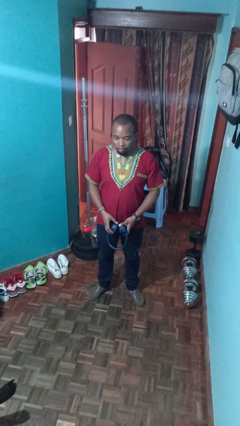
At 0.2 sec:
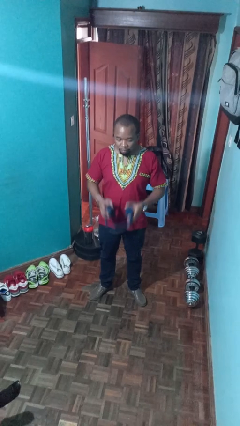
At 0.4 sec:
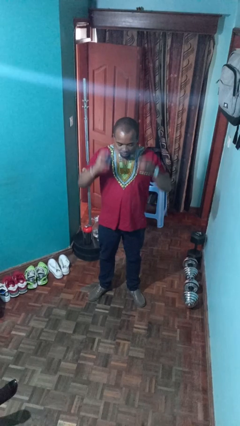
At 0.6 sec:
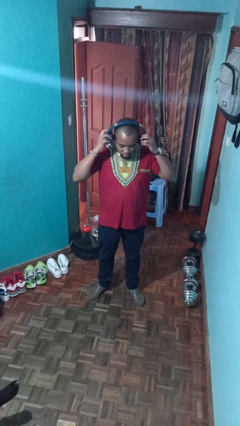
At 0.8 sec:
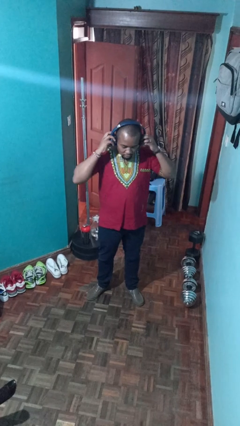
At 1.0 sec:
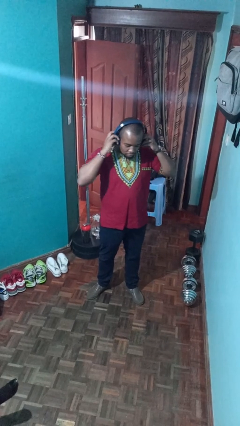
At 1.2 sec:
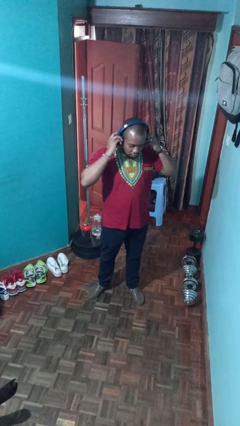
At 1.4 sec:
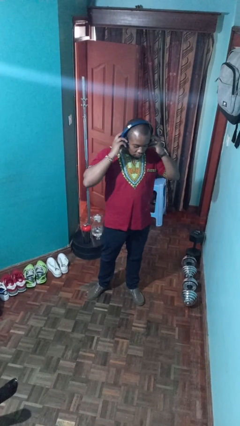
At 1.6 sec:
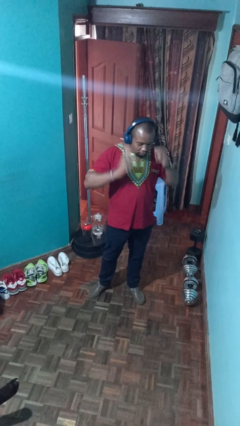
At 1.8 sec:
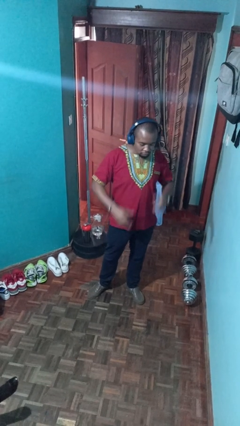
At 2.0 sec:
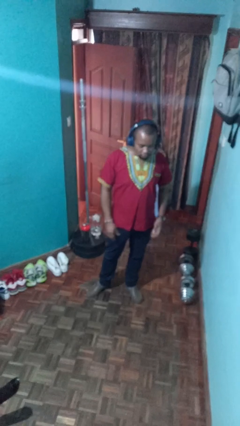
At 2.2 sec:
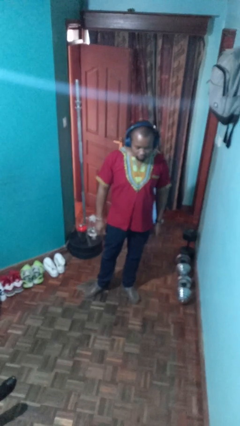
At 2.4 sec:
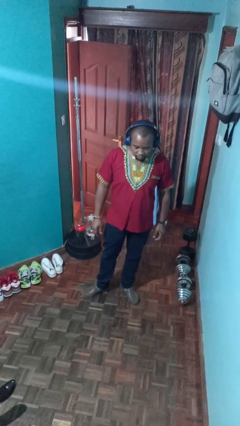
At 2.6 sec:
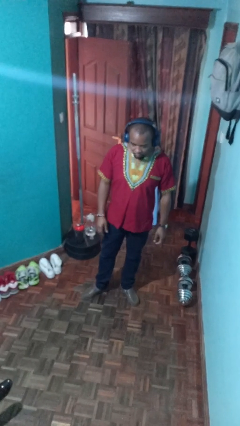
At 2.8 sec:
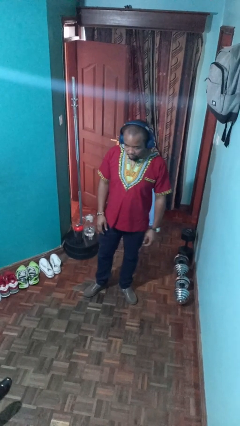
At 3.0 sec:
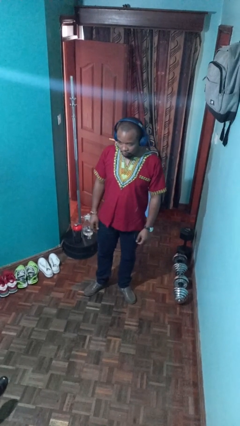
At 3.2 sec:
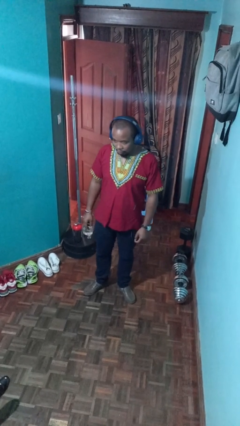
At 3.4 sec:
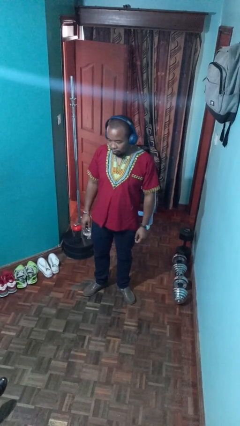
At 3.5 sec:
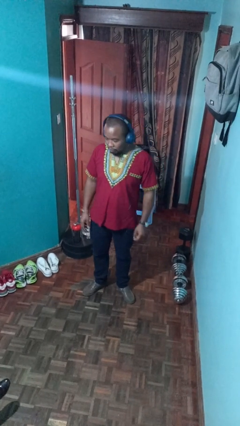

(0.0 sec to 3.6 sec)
person puts on headphones

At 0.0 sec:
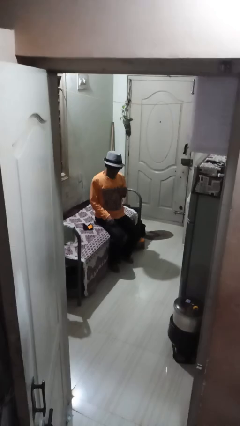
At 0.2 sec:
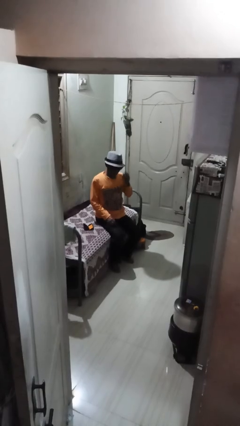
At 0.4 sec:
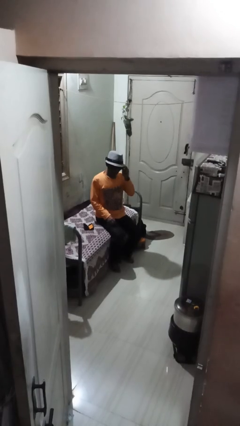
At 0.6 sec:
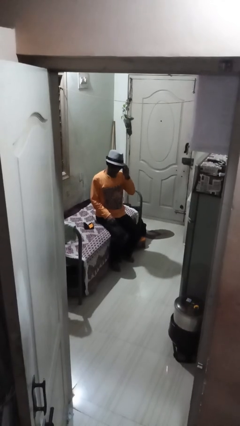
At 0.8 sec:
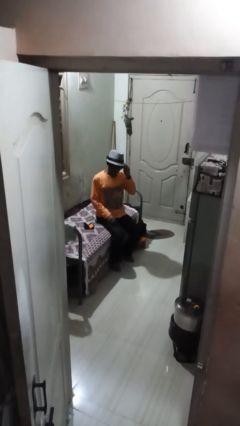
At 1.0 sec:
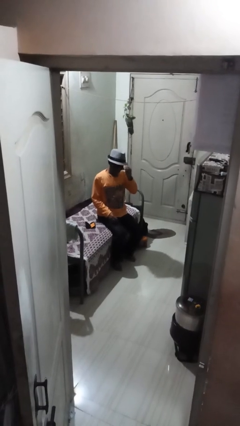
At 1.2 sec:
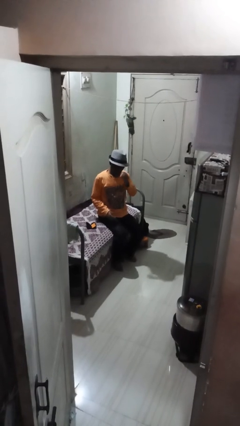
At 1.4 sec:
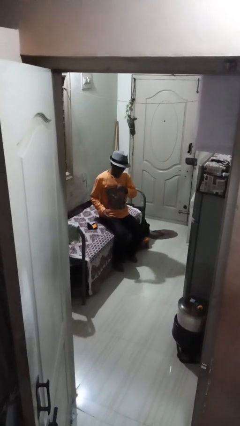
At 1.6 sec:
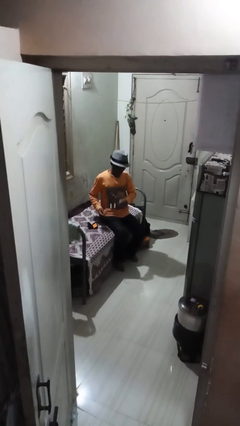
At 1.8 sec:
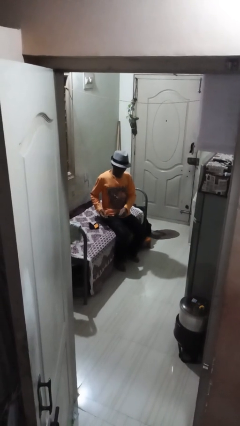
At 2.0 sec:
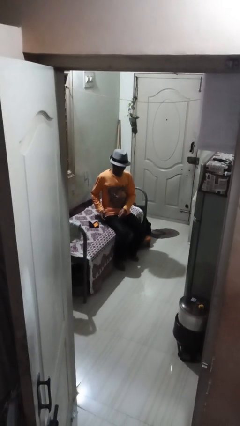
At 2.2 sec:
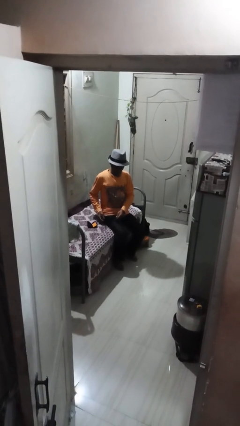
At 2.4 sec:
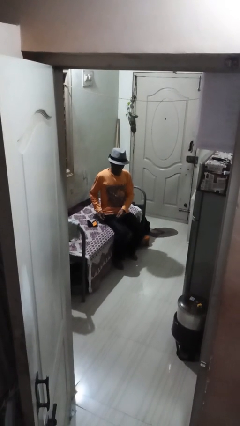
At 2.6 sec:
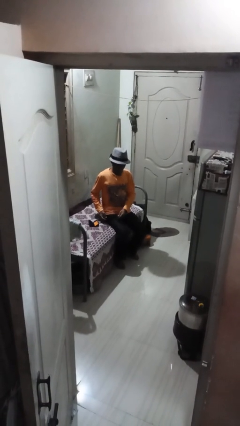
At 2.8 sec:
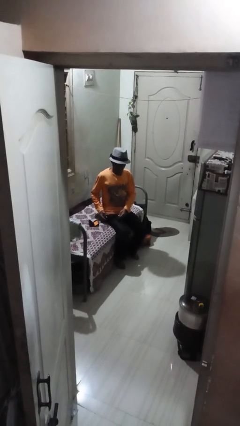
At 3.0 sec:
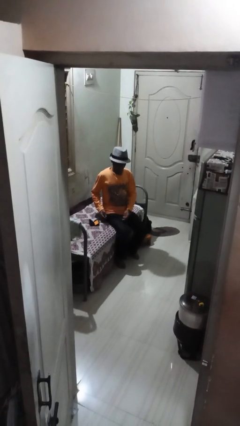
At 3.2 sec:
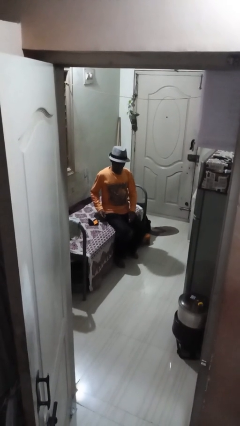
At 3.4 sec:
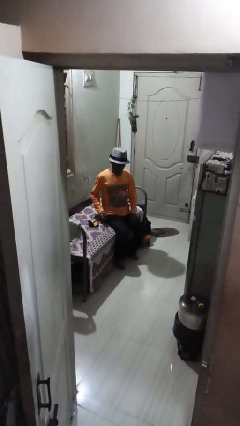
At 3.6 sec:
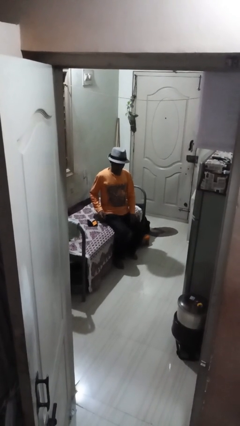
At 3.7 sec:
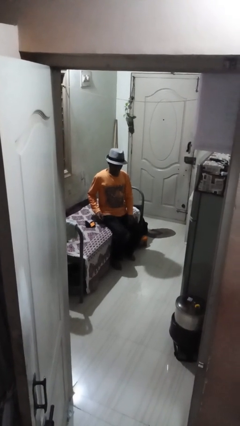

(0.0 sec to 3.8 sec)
person takes off sunglasses

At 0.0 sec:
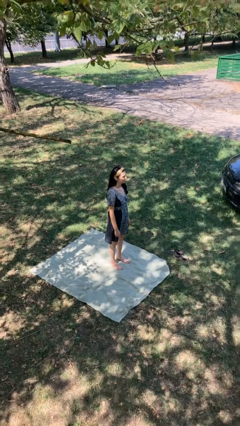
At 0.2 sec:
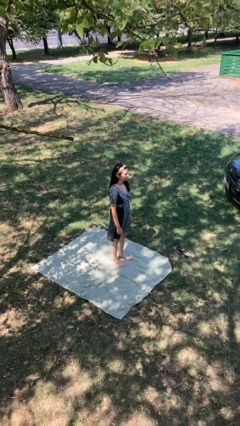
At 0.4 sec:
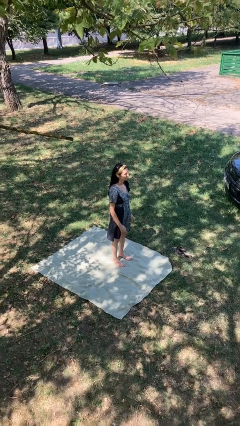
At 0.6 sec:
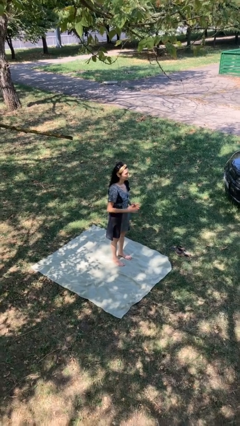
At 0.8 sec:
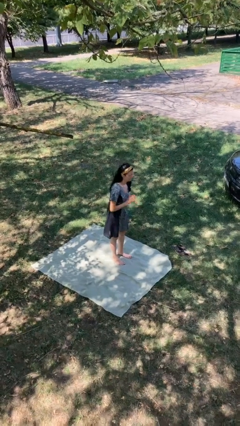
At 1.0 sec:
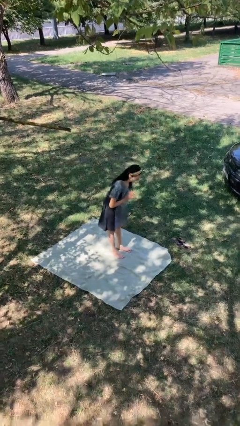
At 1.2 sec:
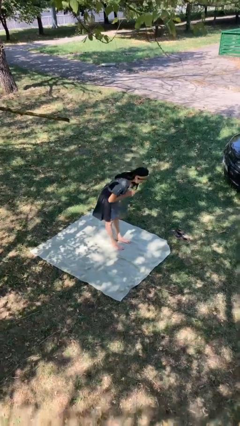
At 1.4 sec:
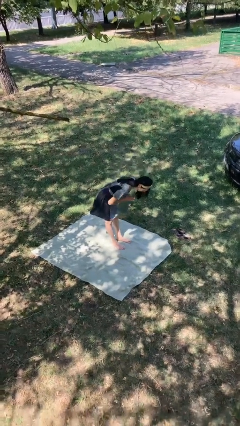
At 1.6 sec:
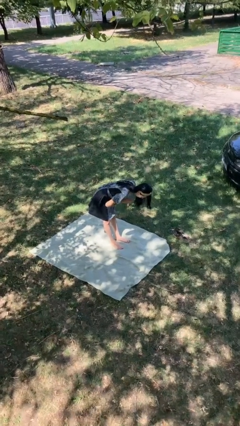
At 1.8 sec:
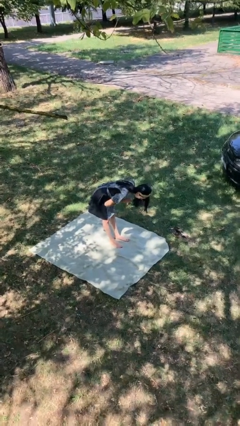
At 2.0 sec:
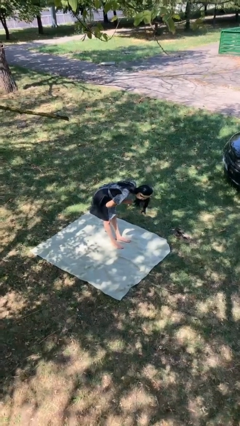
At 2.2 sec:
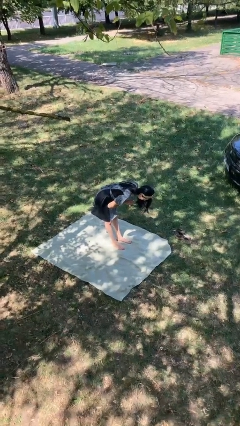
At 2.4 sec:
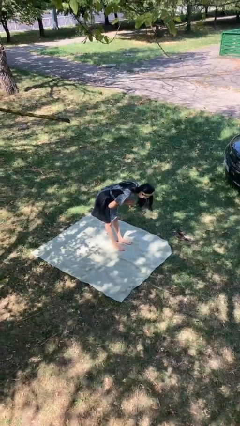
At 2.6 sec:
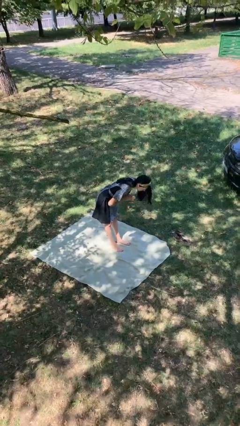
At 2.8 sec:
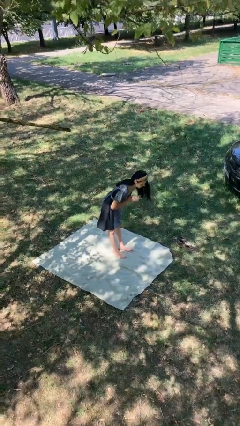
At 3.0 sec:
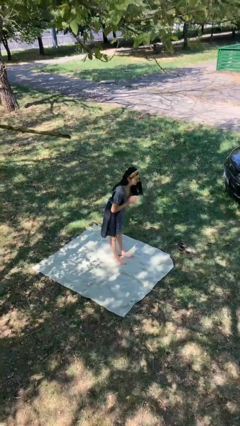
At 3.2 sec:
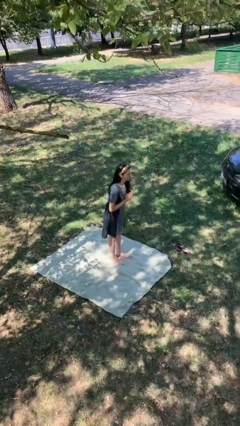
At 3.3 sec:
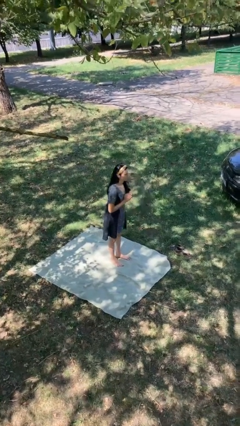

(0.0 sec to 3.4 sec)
person bows

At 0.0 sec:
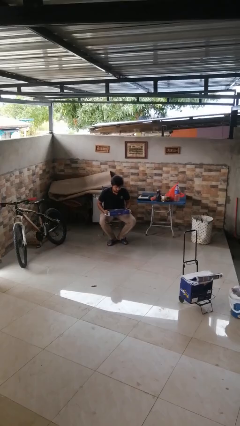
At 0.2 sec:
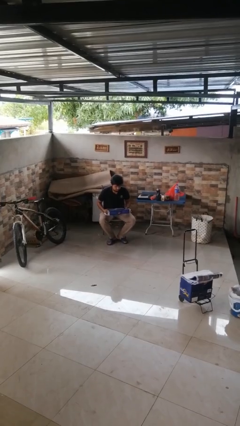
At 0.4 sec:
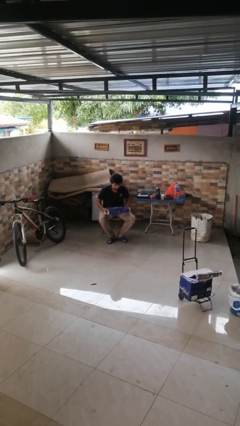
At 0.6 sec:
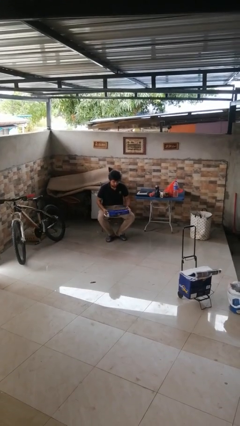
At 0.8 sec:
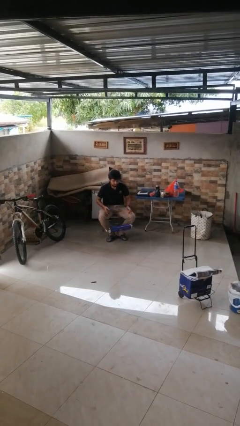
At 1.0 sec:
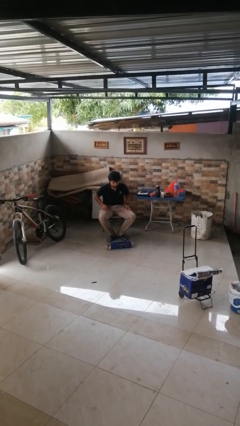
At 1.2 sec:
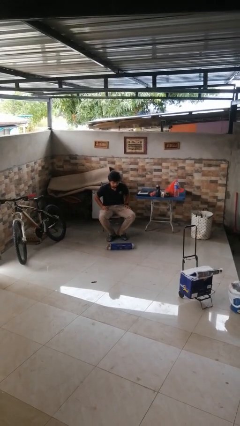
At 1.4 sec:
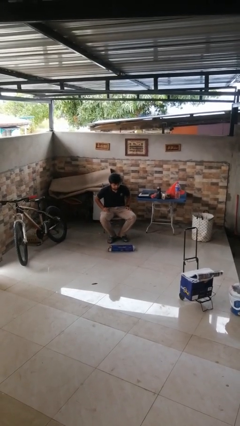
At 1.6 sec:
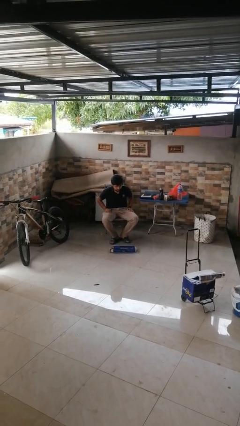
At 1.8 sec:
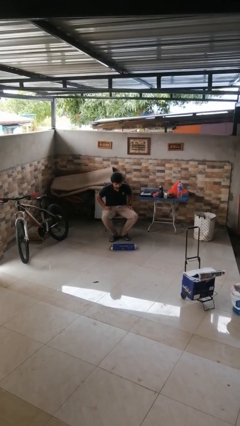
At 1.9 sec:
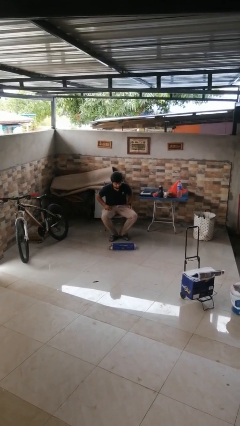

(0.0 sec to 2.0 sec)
person trips on object on floor

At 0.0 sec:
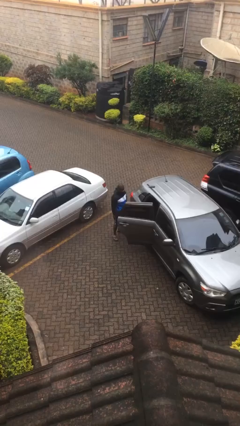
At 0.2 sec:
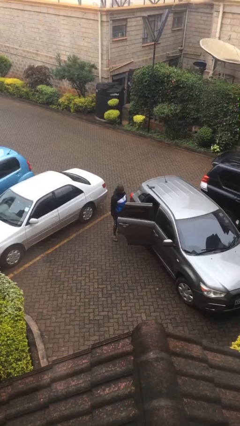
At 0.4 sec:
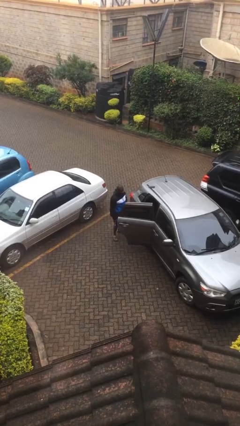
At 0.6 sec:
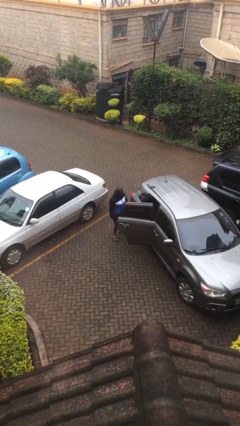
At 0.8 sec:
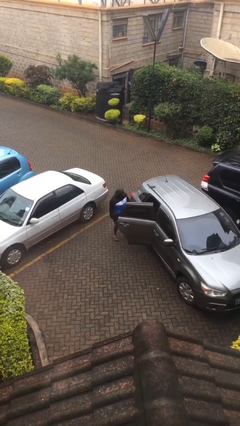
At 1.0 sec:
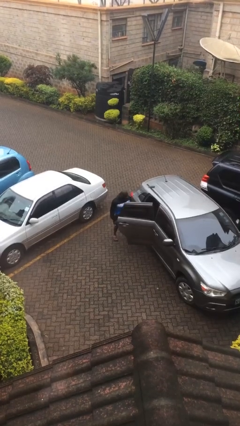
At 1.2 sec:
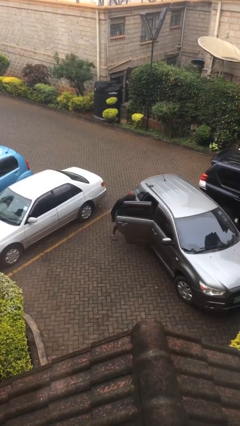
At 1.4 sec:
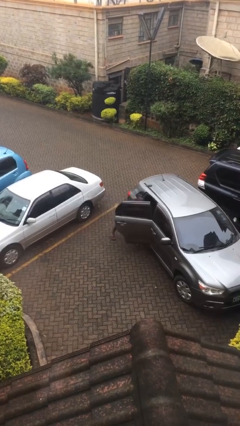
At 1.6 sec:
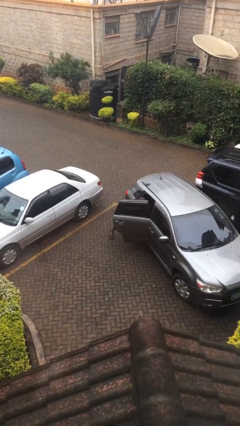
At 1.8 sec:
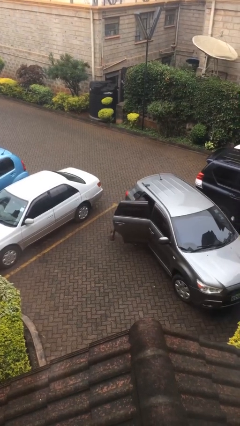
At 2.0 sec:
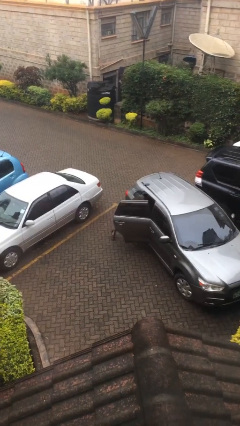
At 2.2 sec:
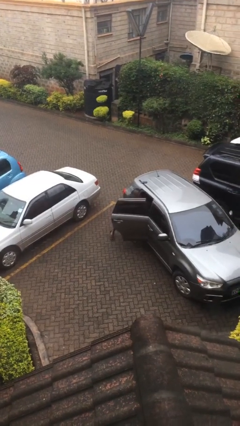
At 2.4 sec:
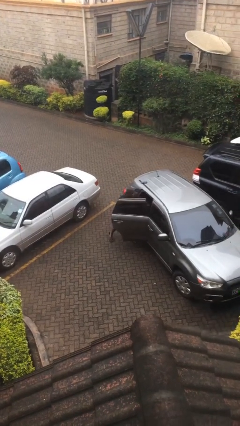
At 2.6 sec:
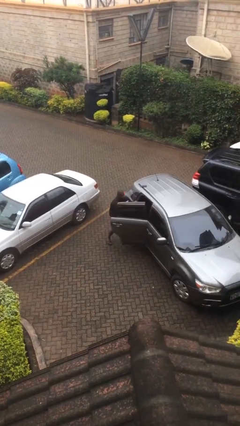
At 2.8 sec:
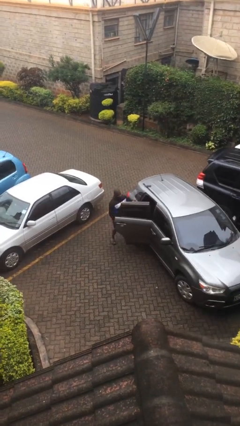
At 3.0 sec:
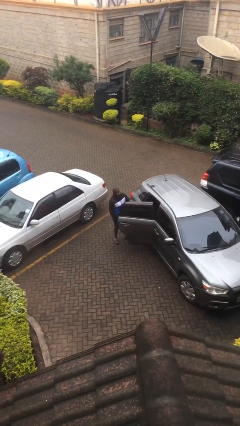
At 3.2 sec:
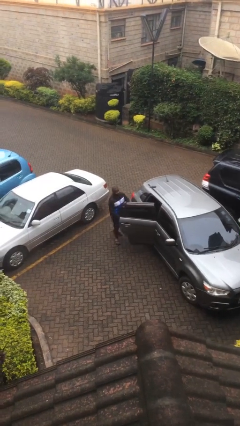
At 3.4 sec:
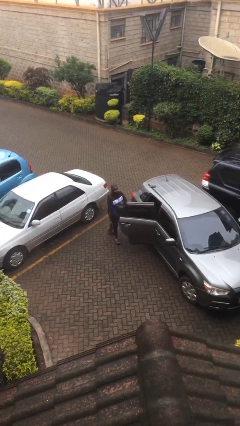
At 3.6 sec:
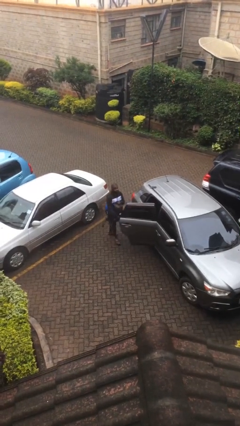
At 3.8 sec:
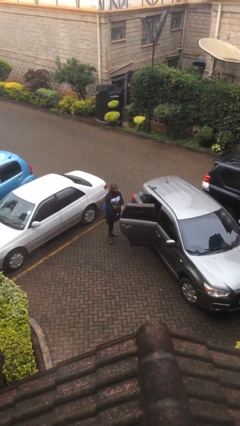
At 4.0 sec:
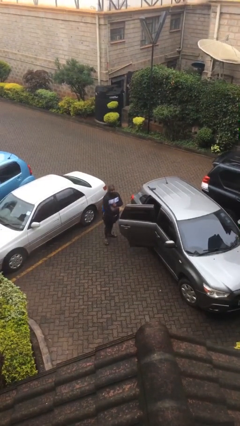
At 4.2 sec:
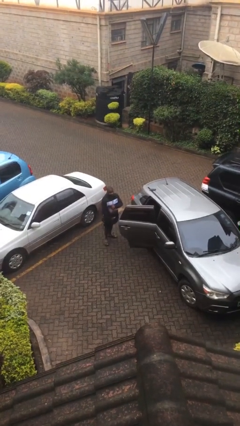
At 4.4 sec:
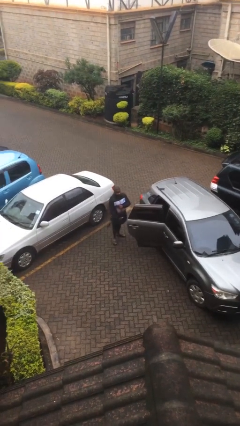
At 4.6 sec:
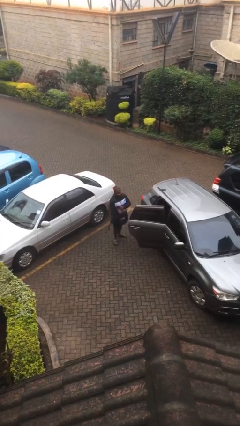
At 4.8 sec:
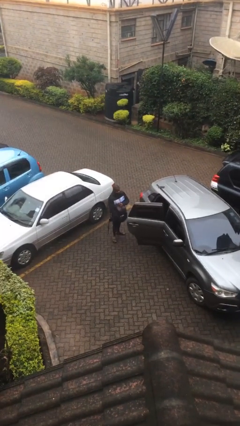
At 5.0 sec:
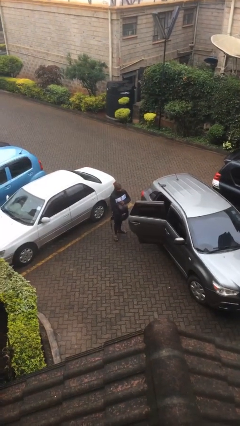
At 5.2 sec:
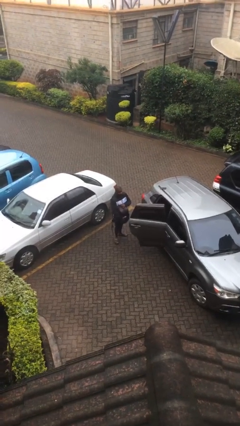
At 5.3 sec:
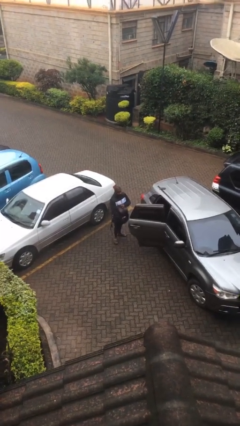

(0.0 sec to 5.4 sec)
person unloads car
